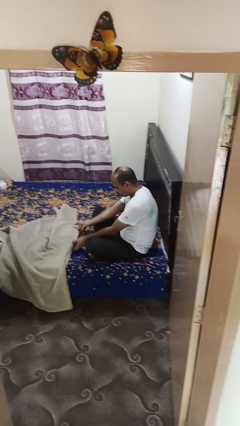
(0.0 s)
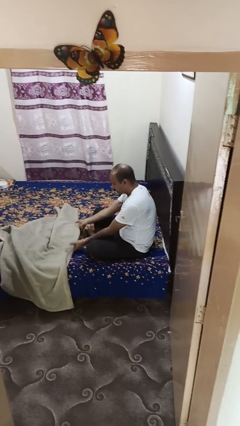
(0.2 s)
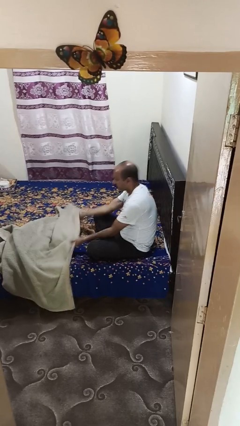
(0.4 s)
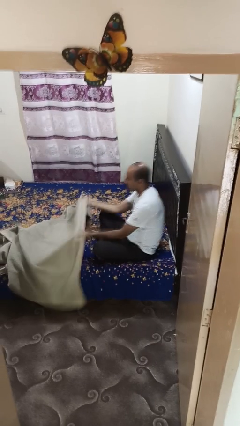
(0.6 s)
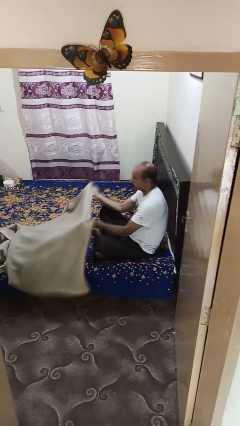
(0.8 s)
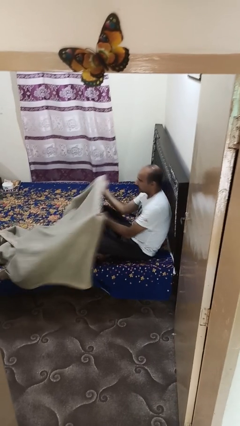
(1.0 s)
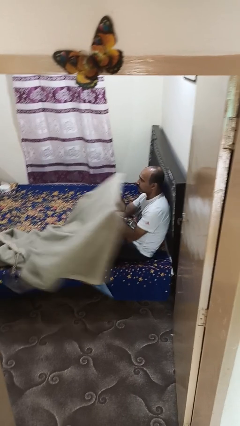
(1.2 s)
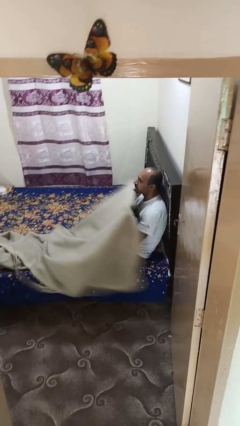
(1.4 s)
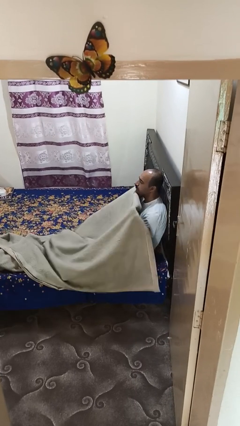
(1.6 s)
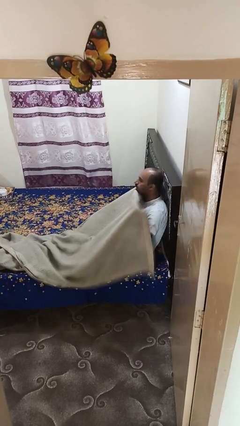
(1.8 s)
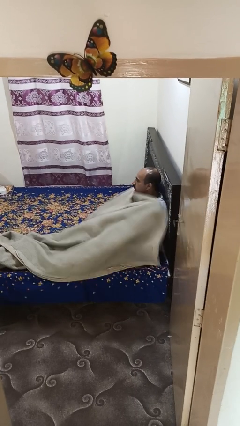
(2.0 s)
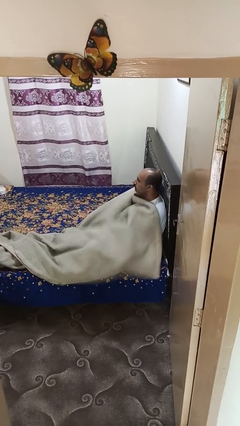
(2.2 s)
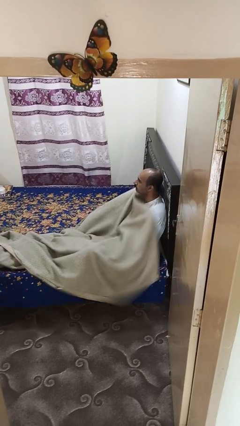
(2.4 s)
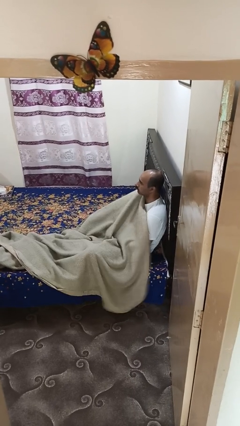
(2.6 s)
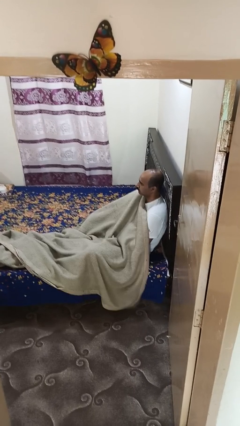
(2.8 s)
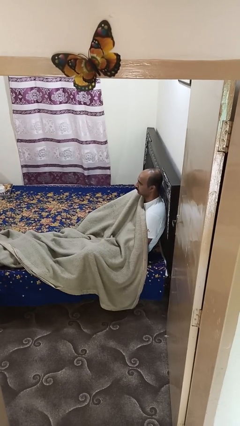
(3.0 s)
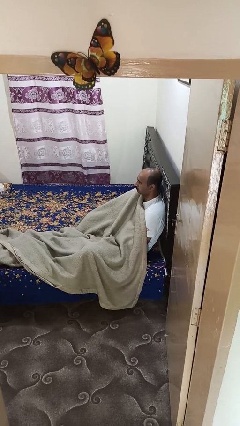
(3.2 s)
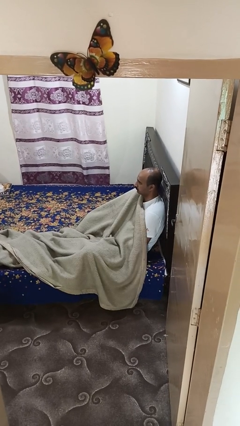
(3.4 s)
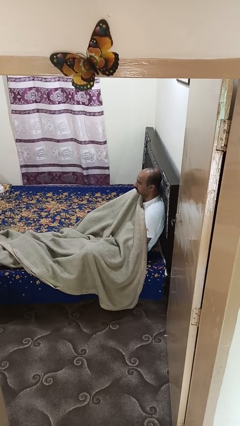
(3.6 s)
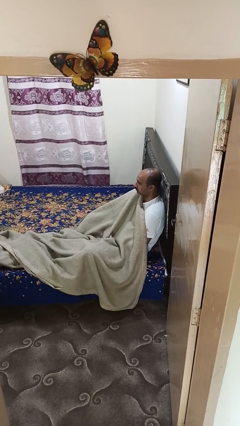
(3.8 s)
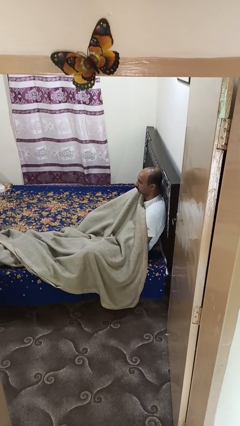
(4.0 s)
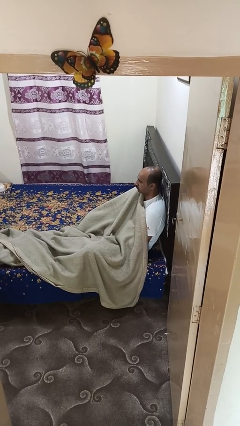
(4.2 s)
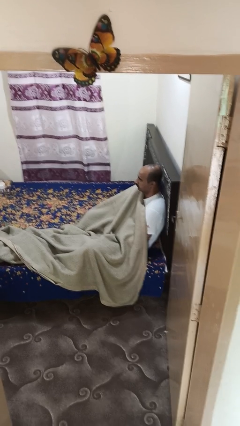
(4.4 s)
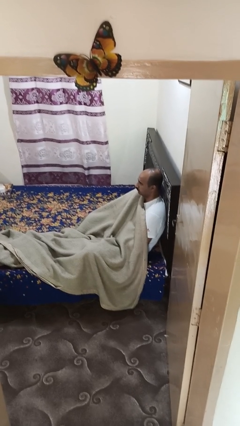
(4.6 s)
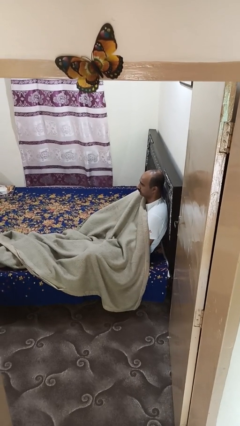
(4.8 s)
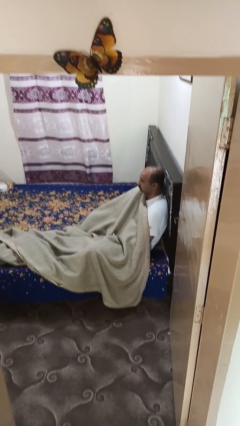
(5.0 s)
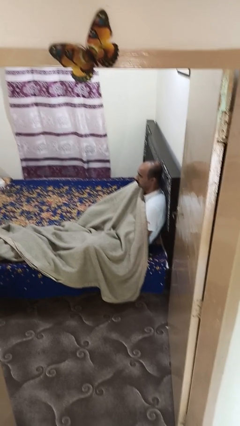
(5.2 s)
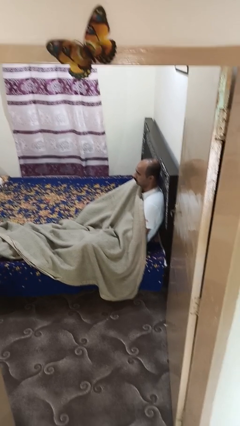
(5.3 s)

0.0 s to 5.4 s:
person covers with blanket

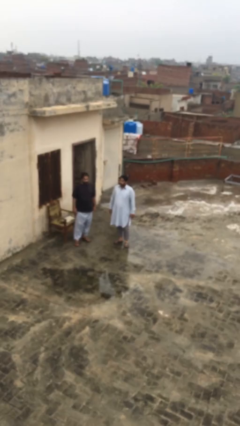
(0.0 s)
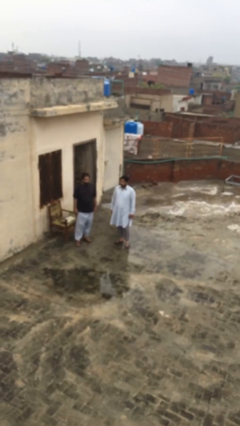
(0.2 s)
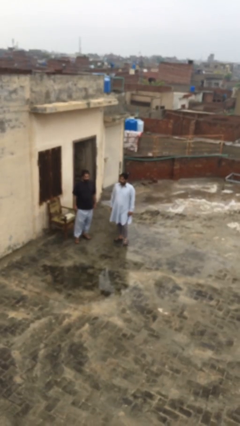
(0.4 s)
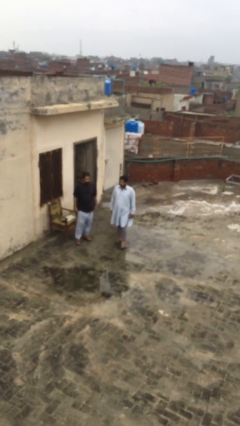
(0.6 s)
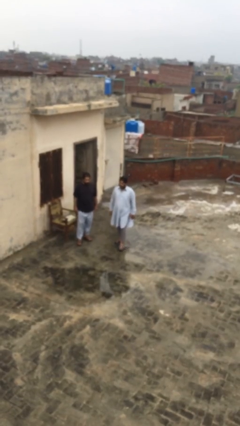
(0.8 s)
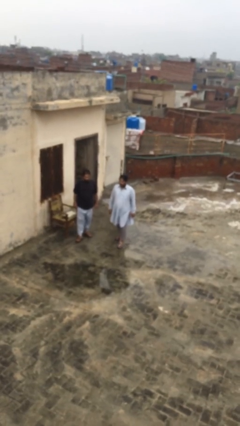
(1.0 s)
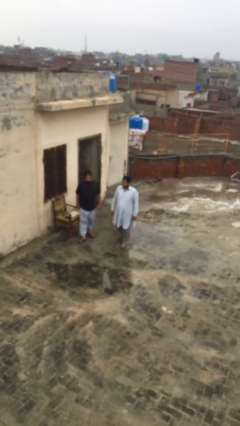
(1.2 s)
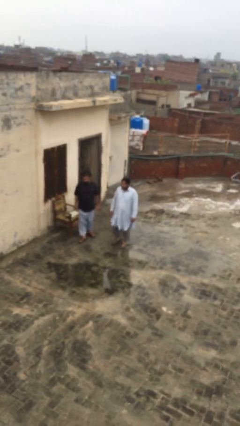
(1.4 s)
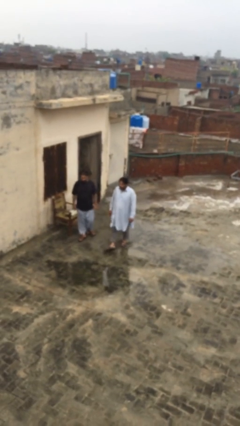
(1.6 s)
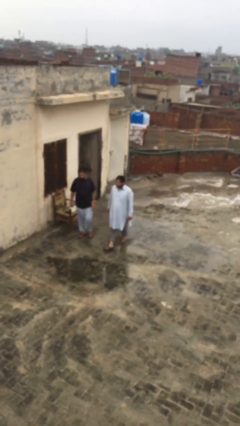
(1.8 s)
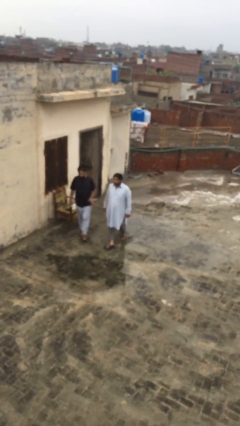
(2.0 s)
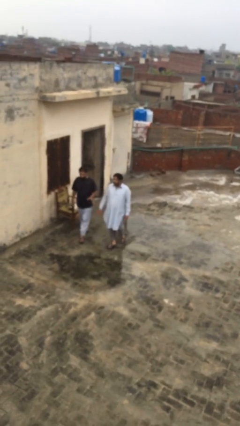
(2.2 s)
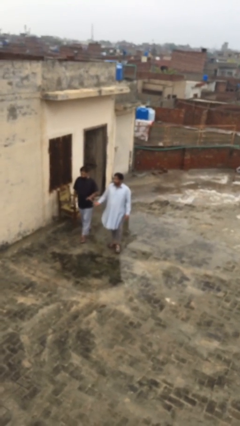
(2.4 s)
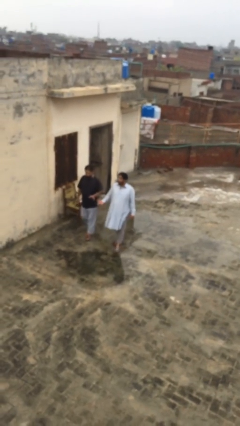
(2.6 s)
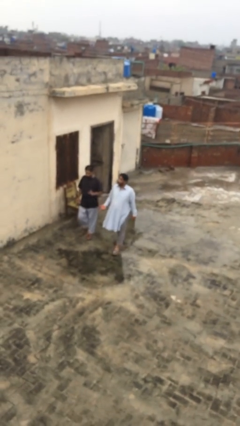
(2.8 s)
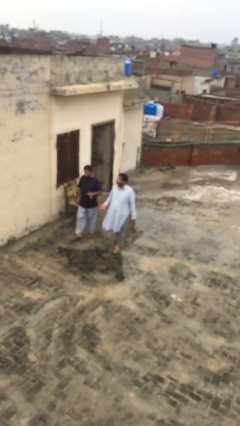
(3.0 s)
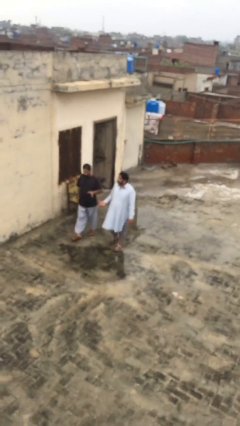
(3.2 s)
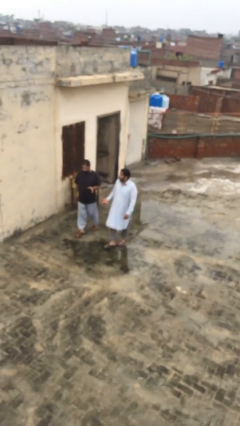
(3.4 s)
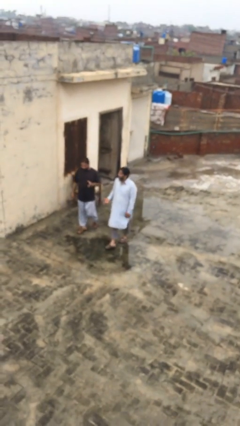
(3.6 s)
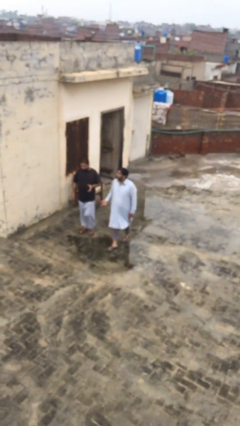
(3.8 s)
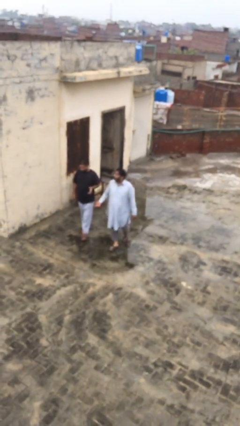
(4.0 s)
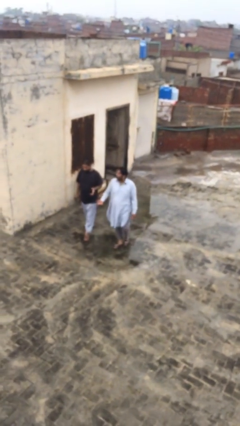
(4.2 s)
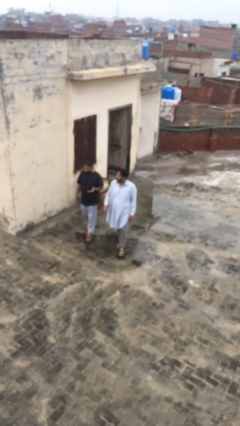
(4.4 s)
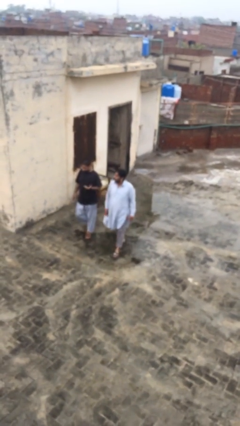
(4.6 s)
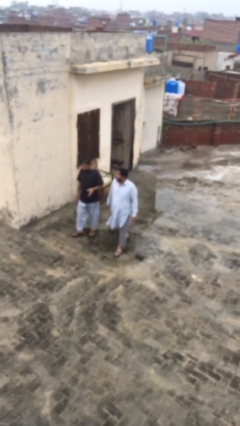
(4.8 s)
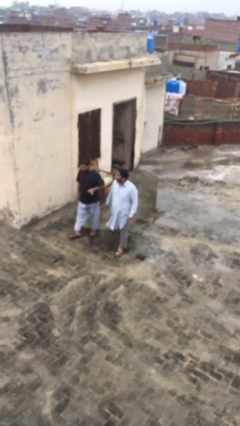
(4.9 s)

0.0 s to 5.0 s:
person talks to person

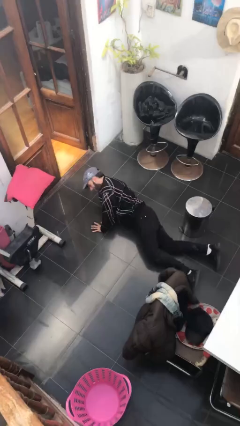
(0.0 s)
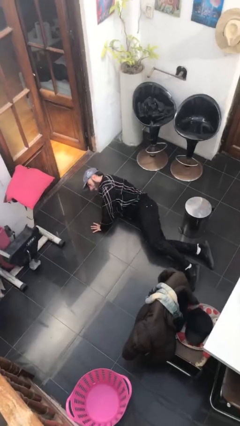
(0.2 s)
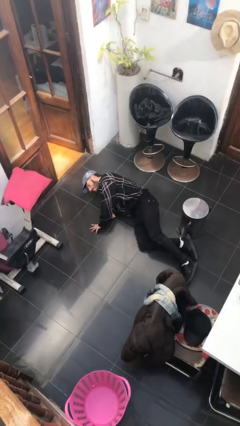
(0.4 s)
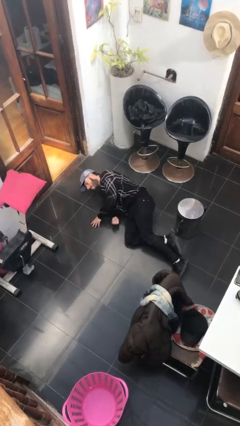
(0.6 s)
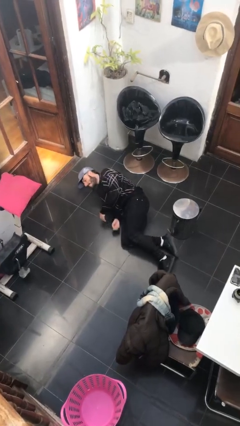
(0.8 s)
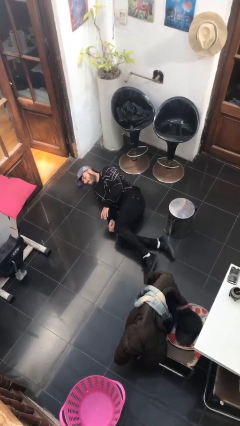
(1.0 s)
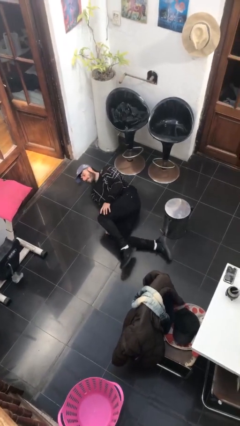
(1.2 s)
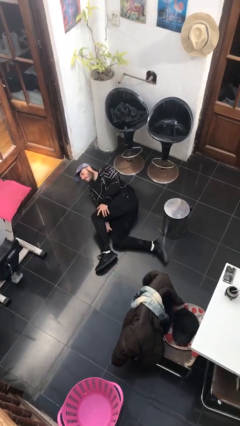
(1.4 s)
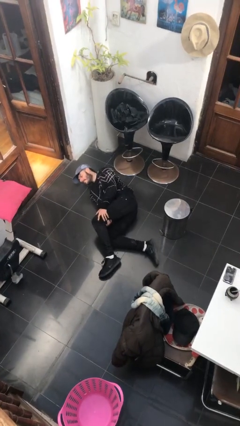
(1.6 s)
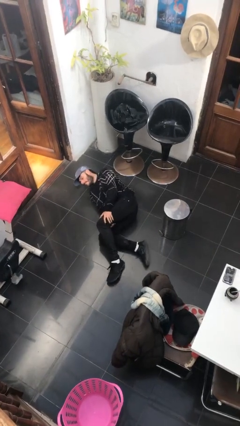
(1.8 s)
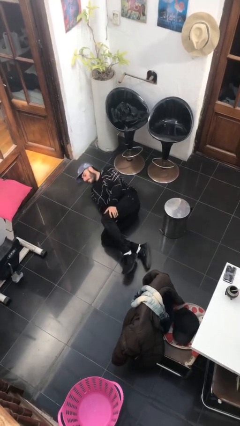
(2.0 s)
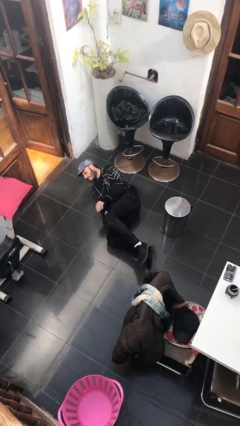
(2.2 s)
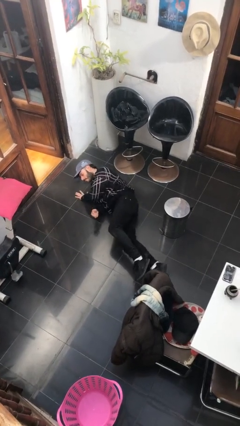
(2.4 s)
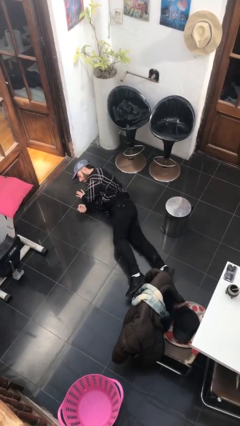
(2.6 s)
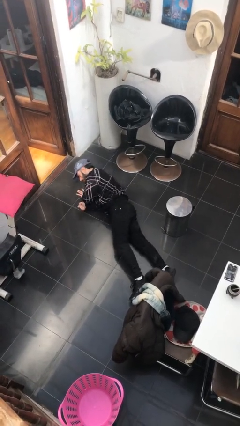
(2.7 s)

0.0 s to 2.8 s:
person lies down on floor

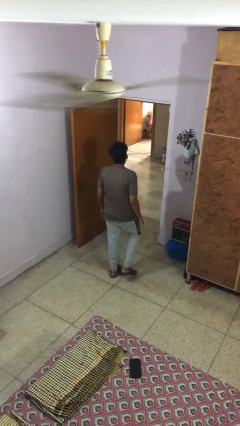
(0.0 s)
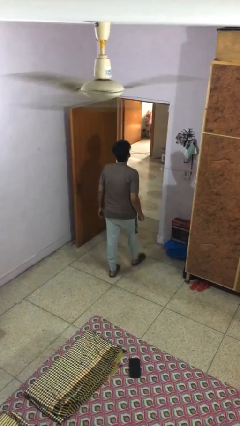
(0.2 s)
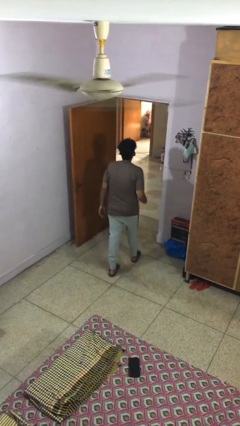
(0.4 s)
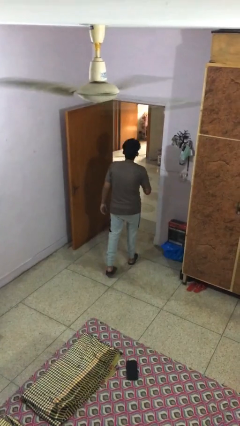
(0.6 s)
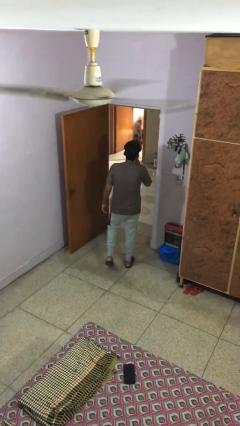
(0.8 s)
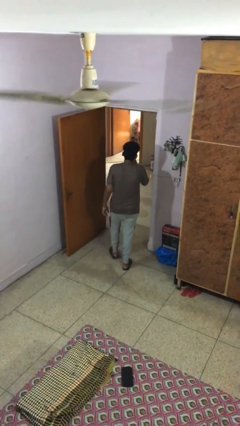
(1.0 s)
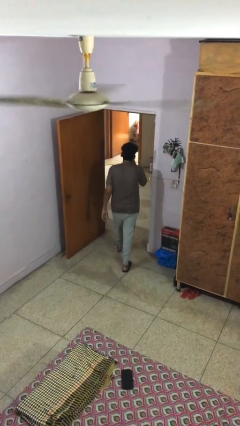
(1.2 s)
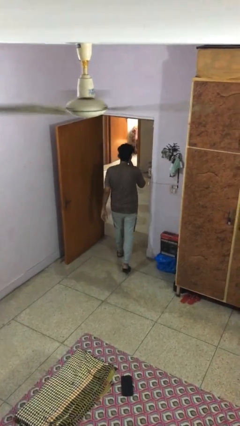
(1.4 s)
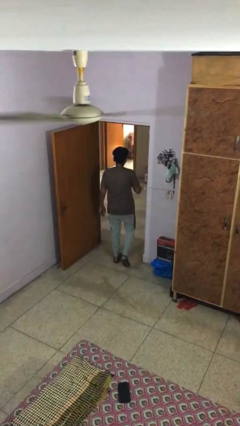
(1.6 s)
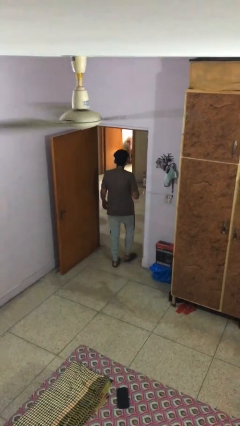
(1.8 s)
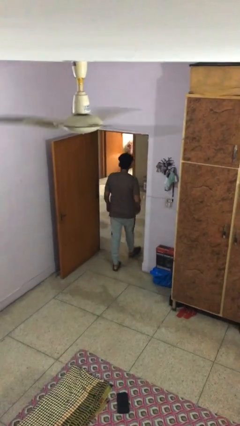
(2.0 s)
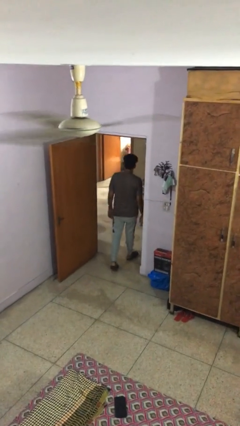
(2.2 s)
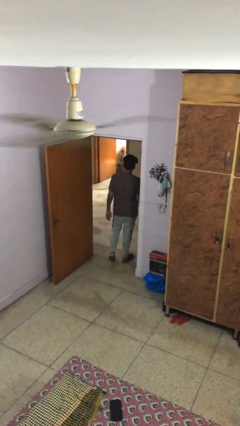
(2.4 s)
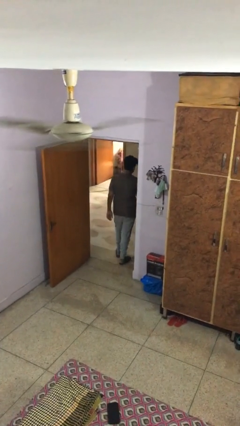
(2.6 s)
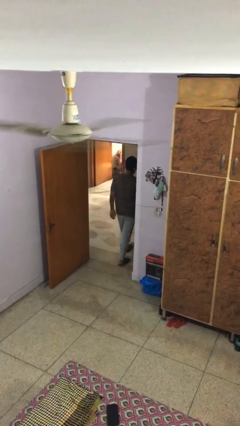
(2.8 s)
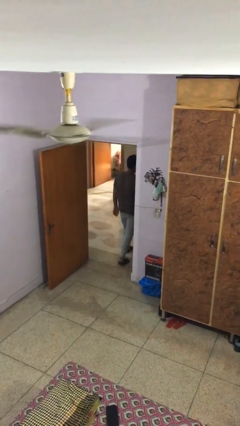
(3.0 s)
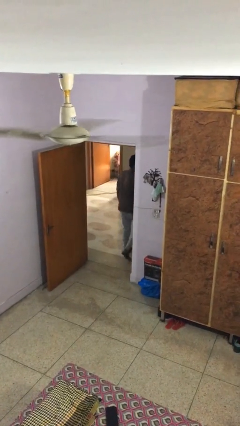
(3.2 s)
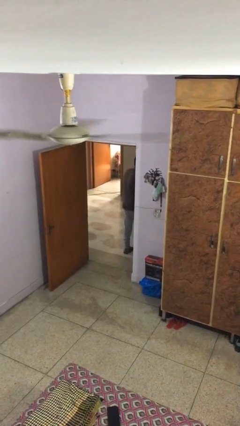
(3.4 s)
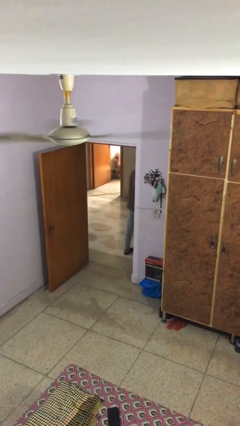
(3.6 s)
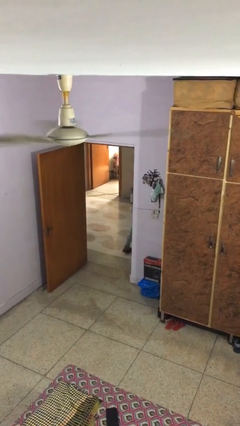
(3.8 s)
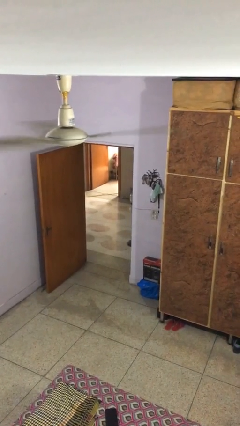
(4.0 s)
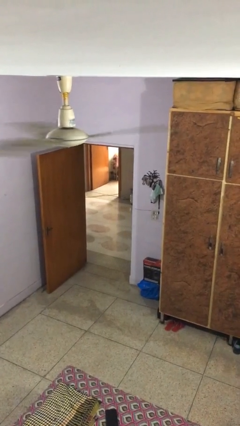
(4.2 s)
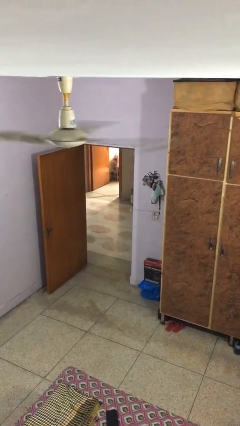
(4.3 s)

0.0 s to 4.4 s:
person exits scene through structure

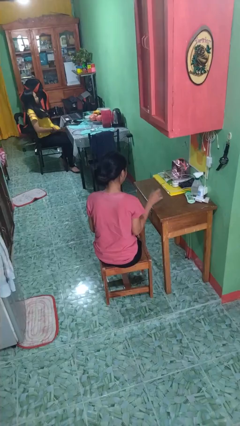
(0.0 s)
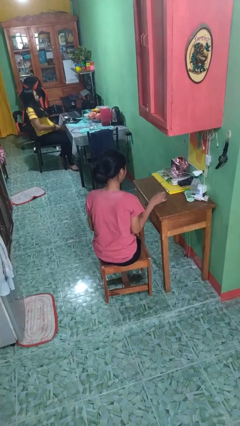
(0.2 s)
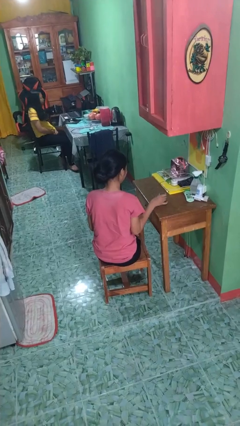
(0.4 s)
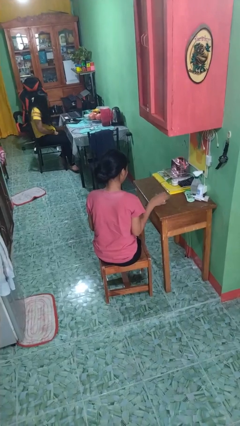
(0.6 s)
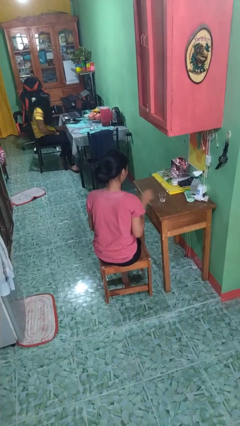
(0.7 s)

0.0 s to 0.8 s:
person puts down object on table
